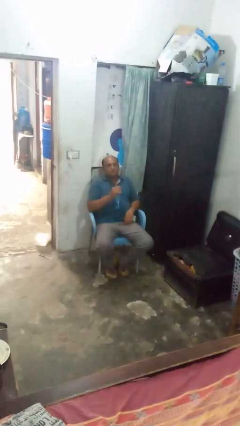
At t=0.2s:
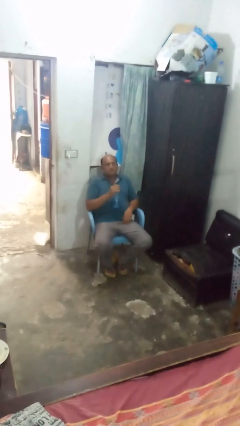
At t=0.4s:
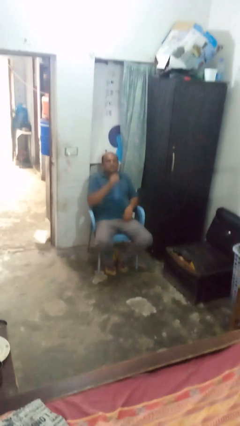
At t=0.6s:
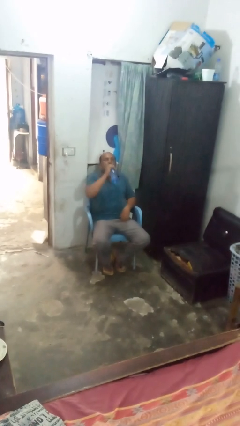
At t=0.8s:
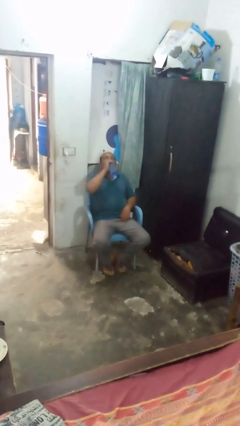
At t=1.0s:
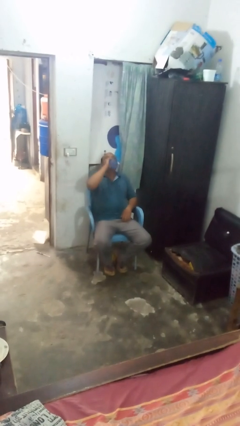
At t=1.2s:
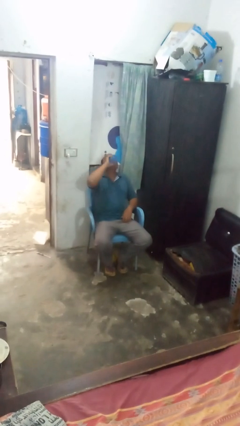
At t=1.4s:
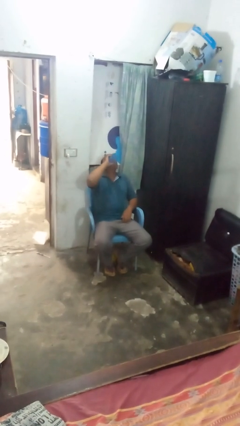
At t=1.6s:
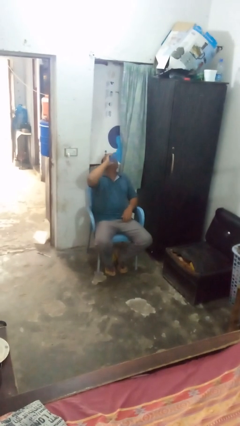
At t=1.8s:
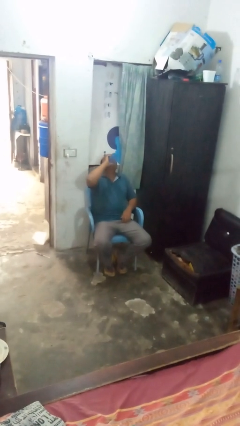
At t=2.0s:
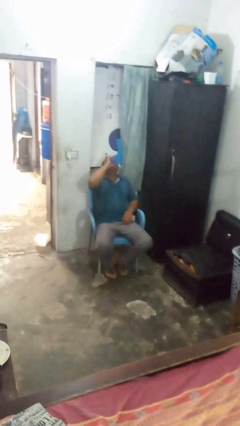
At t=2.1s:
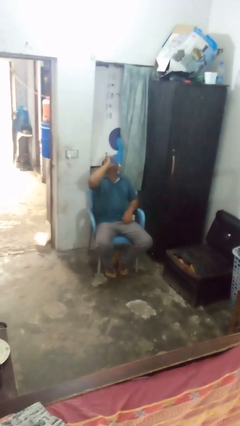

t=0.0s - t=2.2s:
person drinks from bottle

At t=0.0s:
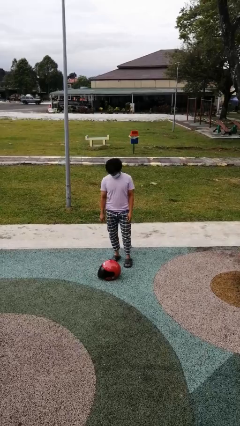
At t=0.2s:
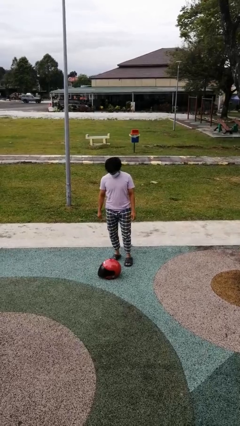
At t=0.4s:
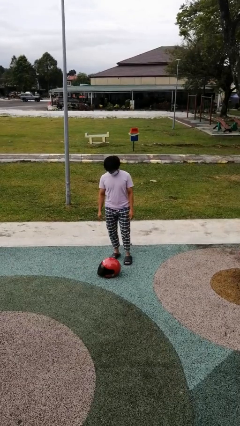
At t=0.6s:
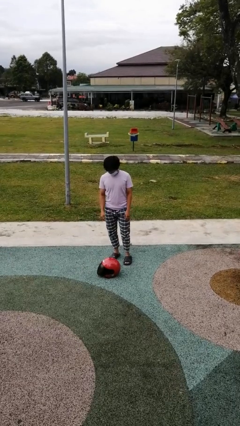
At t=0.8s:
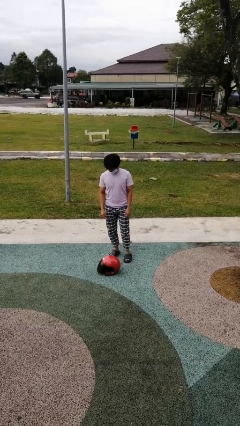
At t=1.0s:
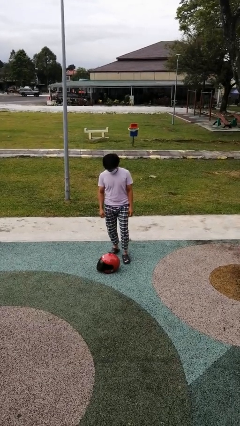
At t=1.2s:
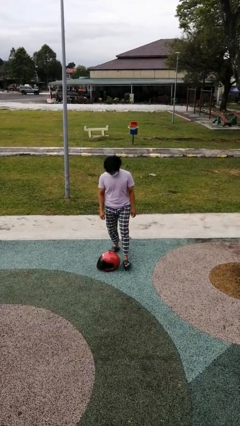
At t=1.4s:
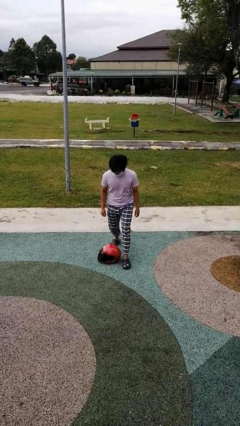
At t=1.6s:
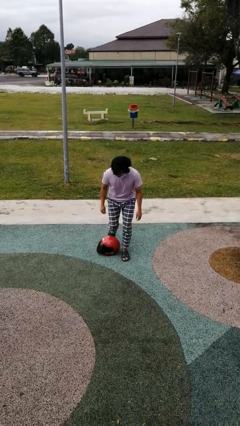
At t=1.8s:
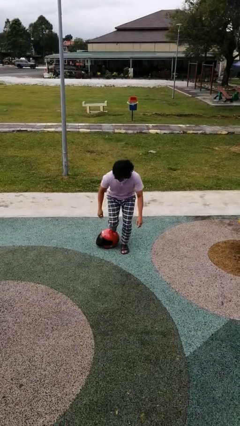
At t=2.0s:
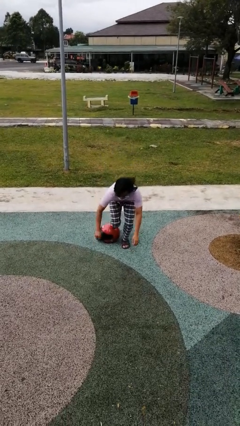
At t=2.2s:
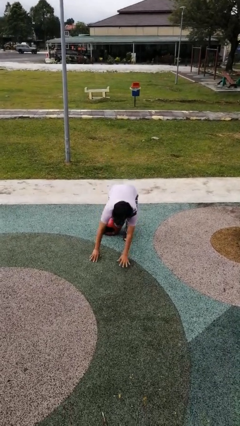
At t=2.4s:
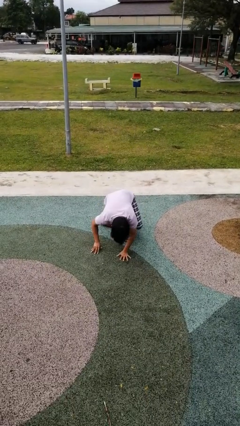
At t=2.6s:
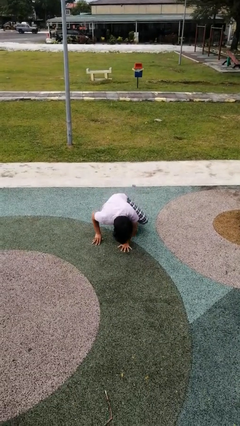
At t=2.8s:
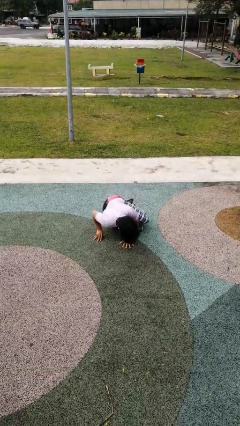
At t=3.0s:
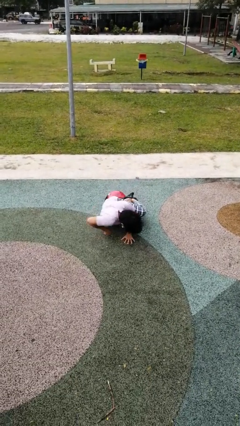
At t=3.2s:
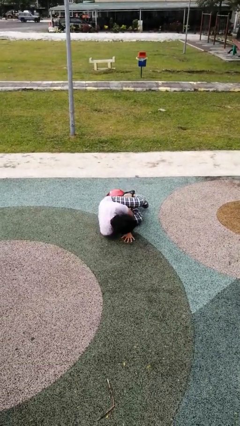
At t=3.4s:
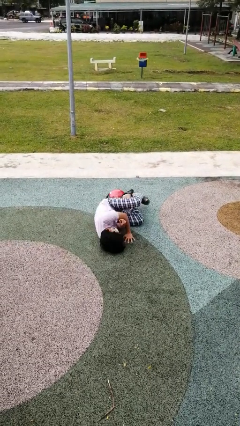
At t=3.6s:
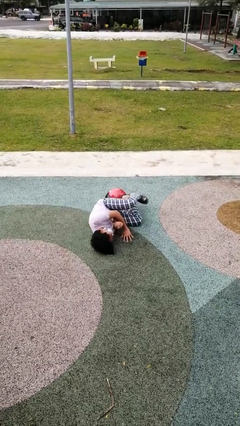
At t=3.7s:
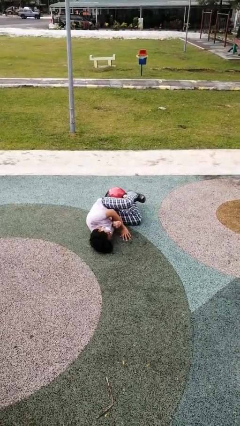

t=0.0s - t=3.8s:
person trips on object on floor

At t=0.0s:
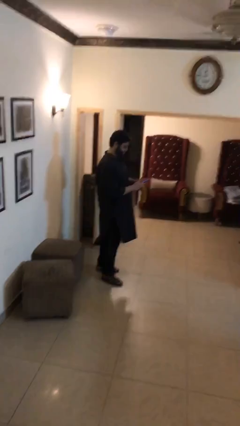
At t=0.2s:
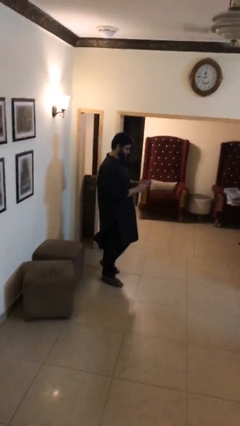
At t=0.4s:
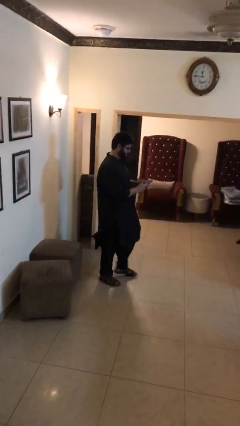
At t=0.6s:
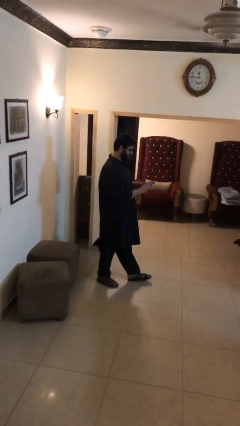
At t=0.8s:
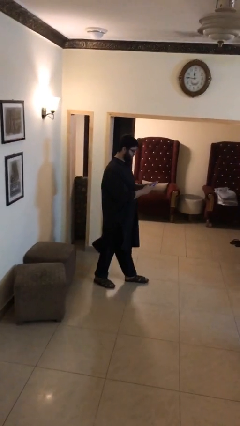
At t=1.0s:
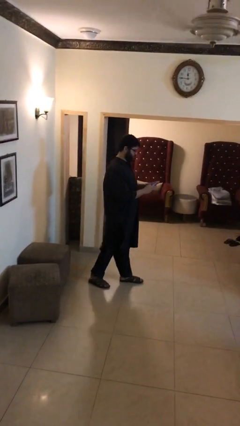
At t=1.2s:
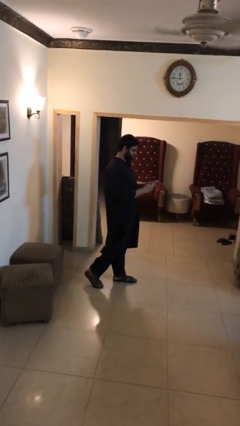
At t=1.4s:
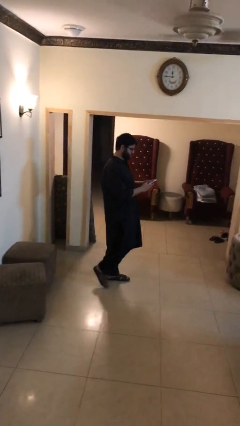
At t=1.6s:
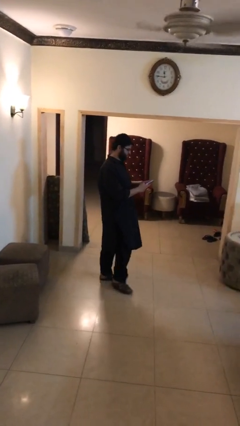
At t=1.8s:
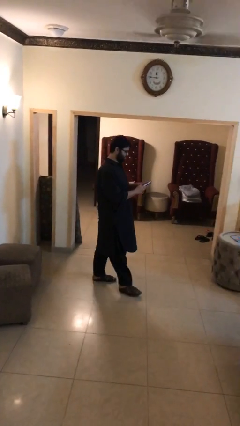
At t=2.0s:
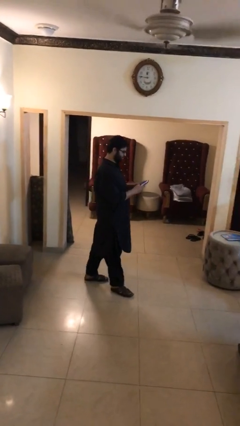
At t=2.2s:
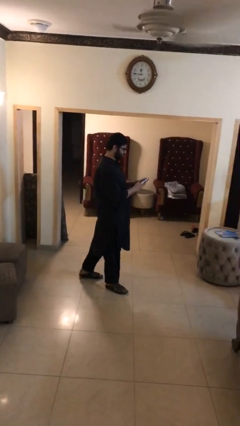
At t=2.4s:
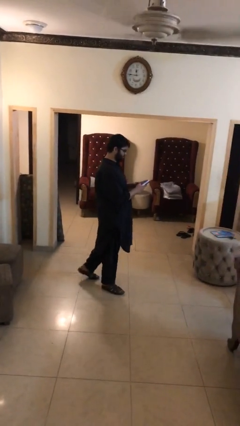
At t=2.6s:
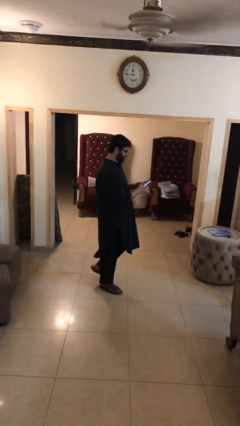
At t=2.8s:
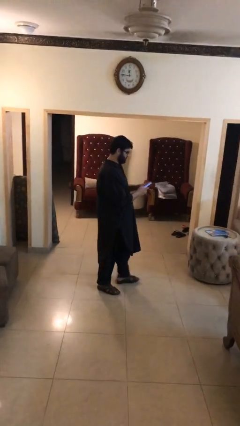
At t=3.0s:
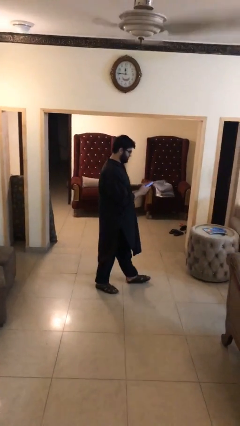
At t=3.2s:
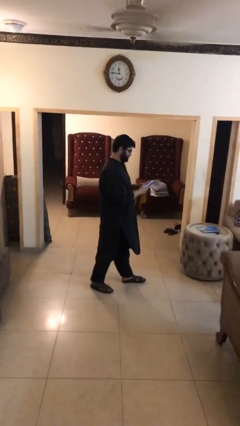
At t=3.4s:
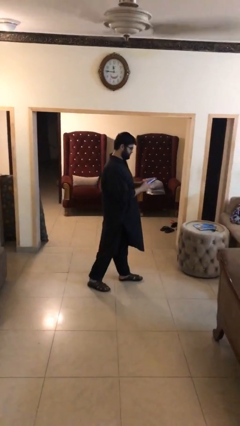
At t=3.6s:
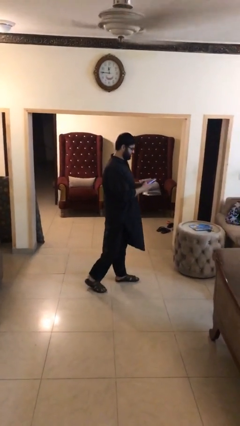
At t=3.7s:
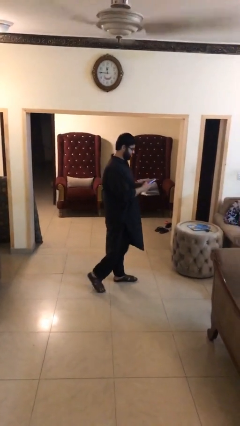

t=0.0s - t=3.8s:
person texts on phone

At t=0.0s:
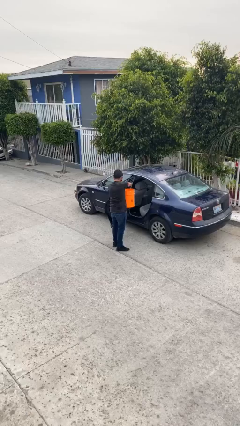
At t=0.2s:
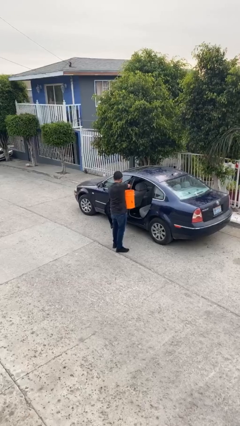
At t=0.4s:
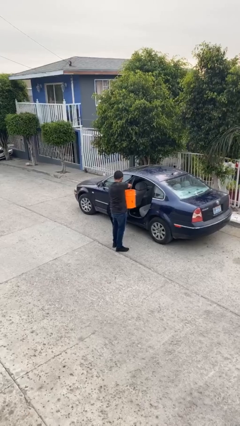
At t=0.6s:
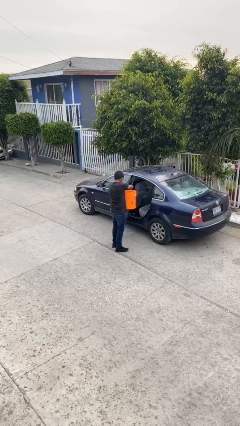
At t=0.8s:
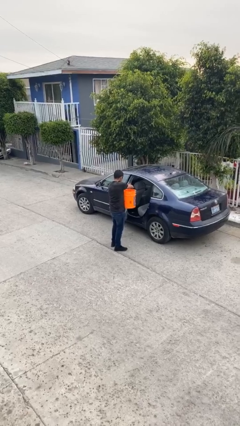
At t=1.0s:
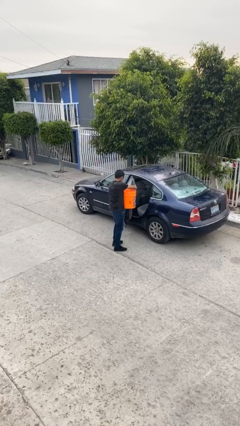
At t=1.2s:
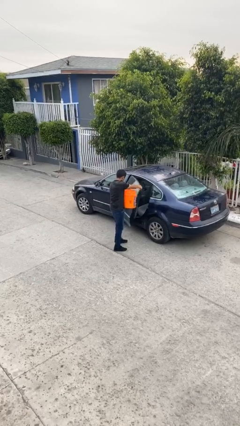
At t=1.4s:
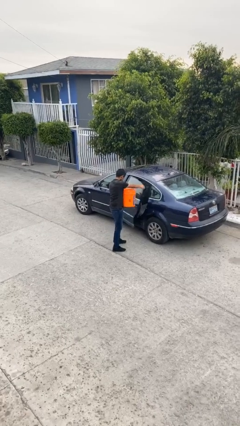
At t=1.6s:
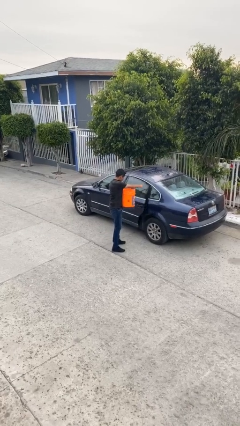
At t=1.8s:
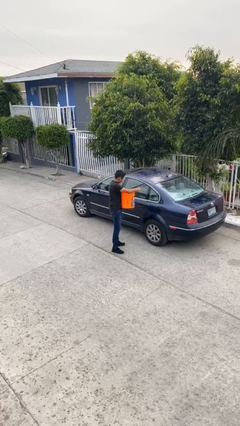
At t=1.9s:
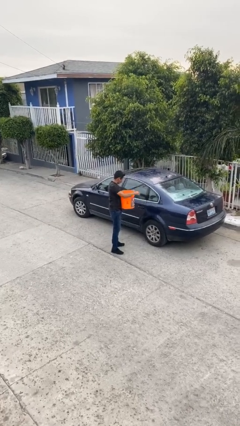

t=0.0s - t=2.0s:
person closes car door

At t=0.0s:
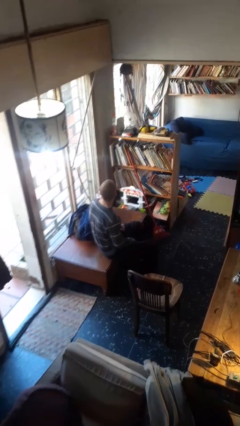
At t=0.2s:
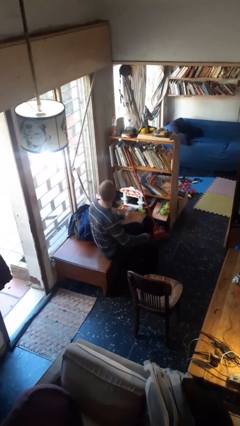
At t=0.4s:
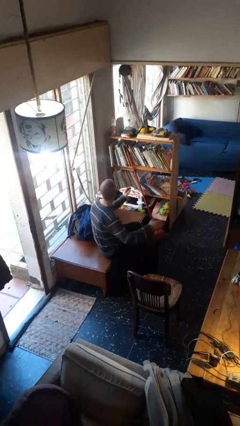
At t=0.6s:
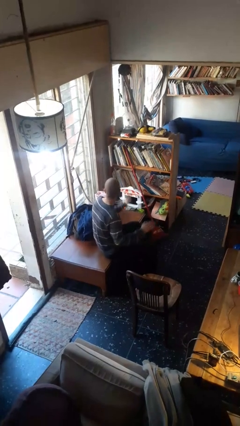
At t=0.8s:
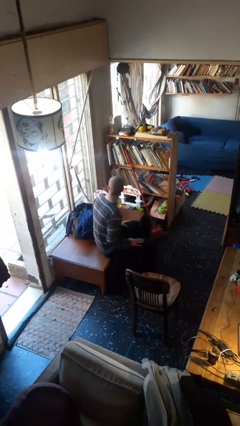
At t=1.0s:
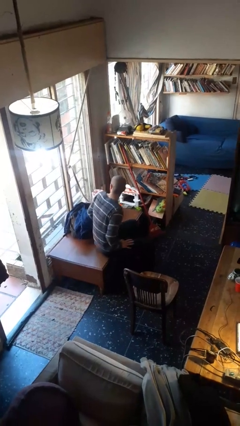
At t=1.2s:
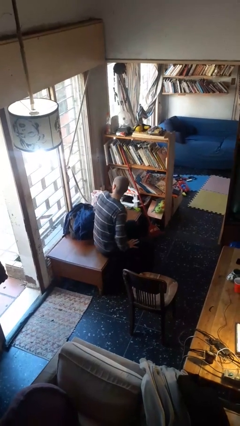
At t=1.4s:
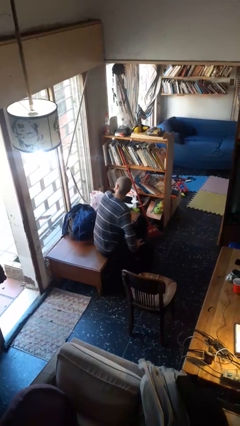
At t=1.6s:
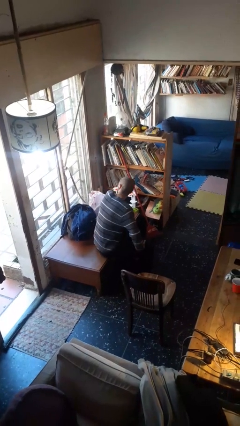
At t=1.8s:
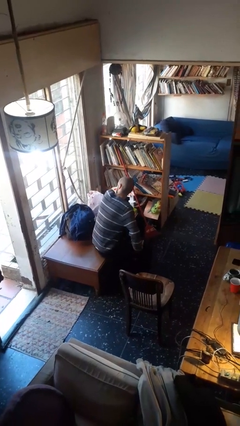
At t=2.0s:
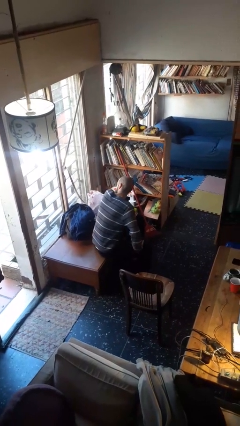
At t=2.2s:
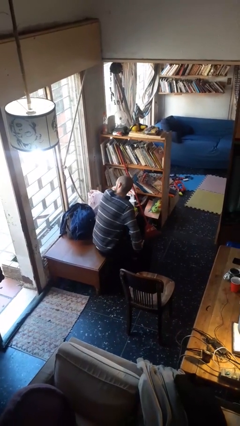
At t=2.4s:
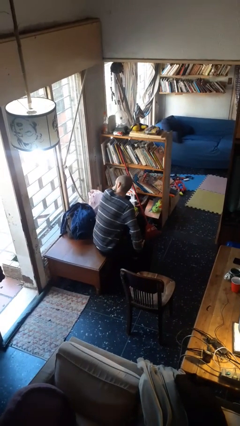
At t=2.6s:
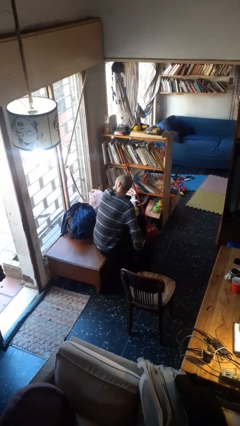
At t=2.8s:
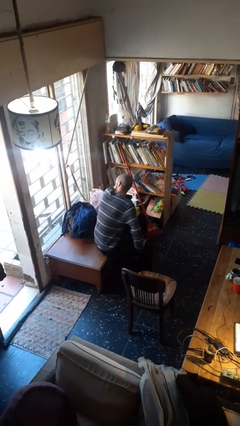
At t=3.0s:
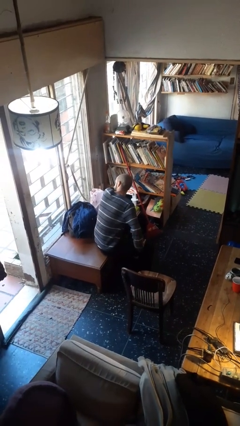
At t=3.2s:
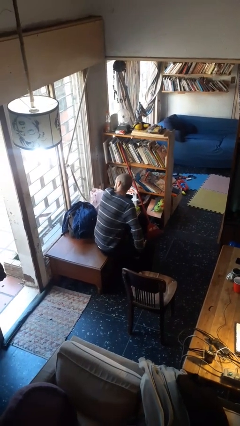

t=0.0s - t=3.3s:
person slaps hands on thighs

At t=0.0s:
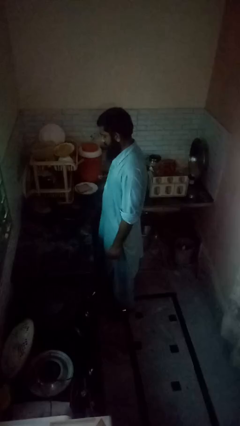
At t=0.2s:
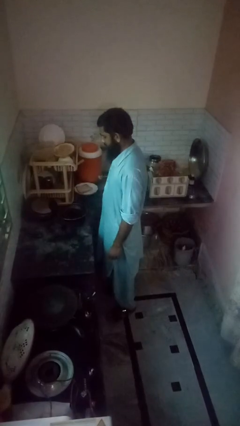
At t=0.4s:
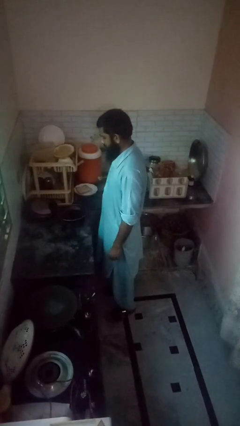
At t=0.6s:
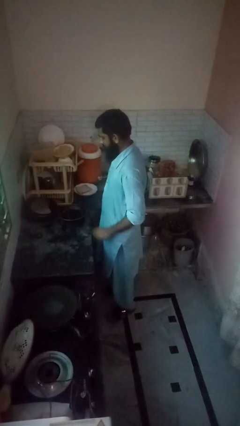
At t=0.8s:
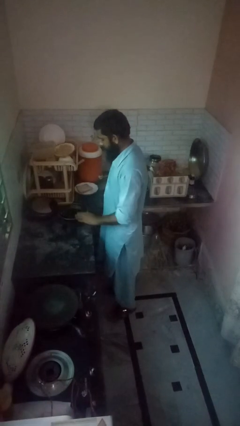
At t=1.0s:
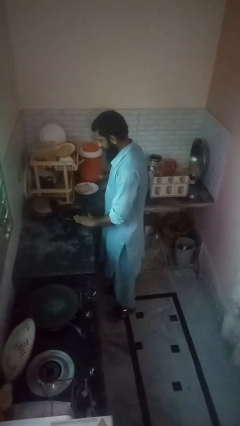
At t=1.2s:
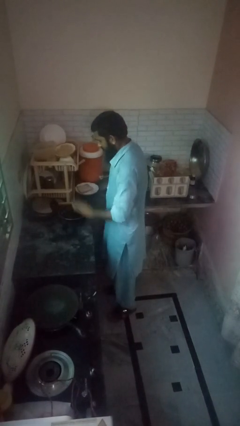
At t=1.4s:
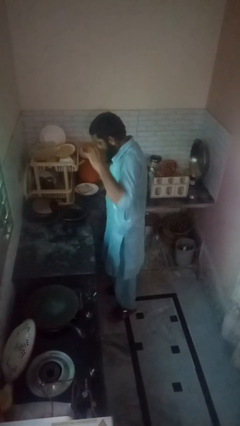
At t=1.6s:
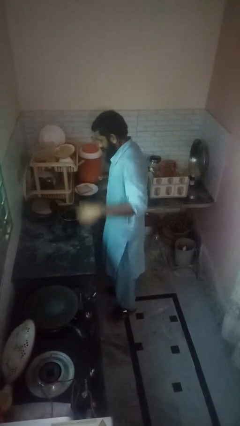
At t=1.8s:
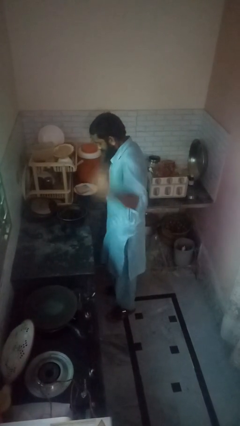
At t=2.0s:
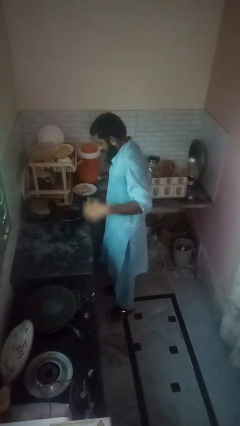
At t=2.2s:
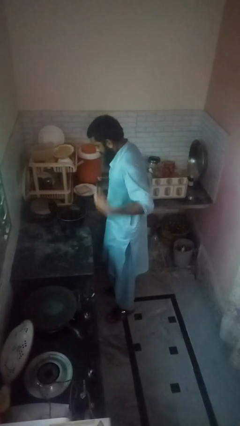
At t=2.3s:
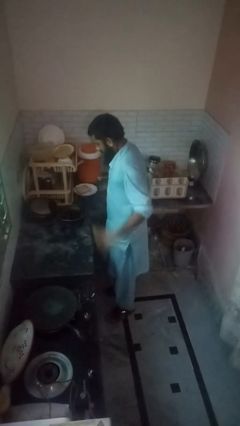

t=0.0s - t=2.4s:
person burns hand
